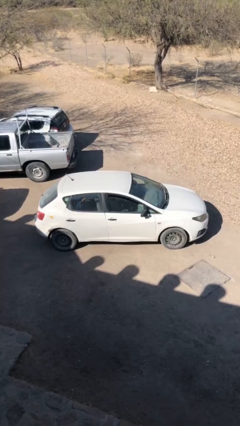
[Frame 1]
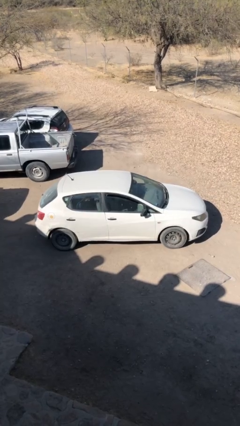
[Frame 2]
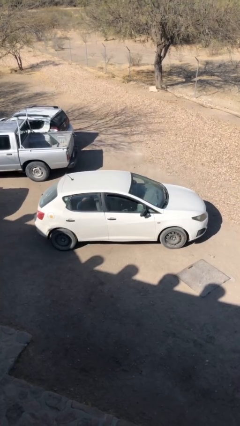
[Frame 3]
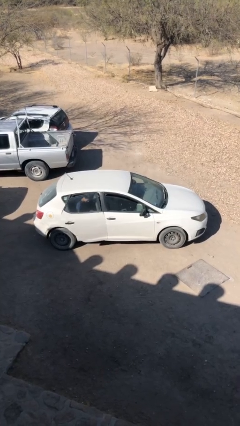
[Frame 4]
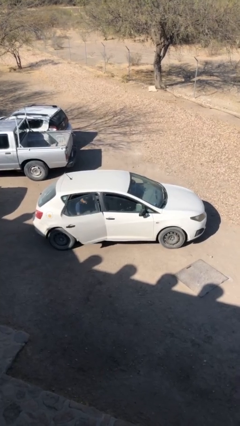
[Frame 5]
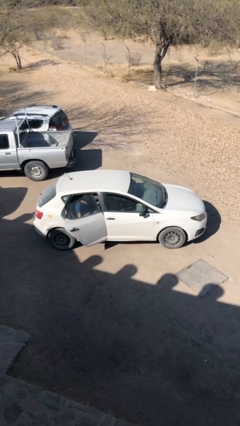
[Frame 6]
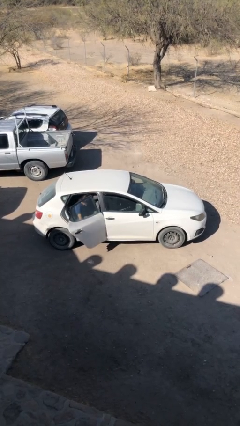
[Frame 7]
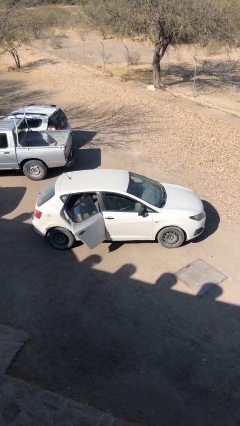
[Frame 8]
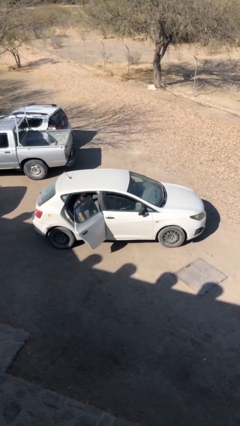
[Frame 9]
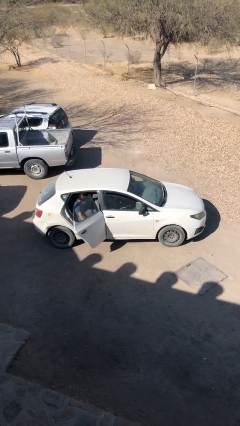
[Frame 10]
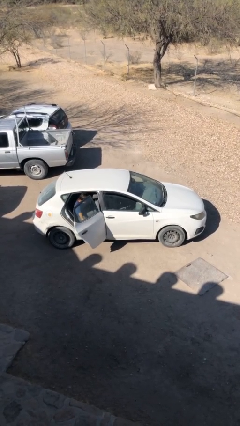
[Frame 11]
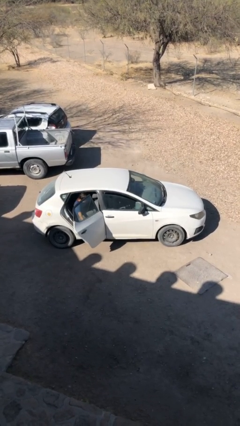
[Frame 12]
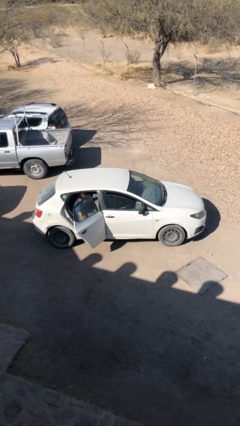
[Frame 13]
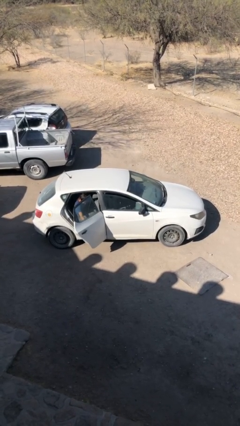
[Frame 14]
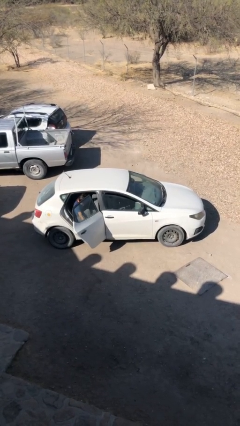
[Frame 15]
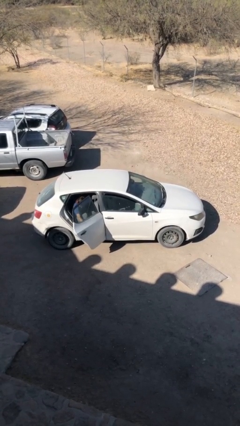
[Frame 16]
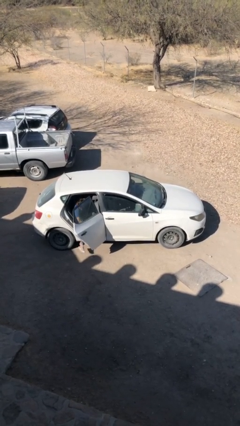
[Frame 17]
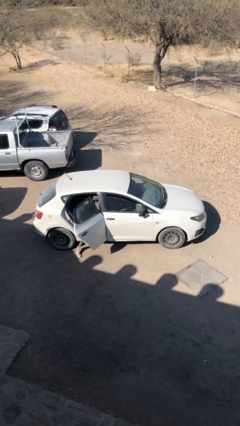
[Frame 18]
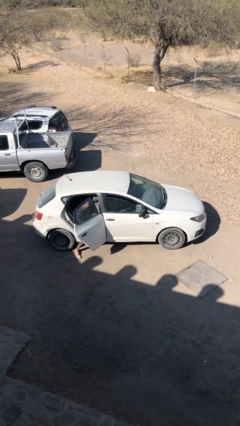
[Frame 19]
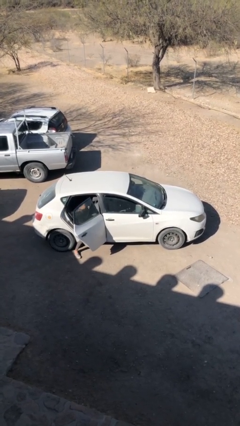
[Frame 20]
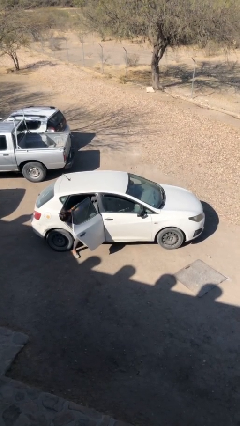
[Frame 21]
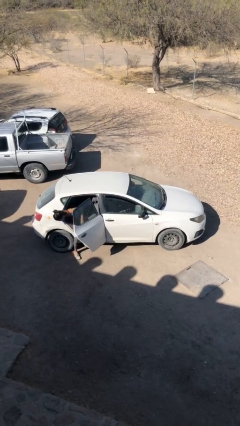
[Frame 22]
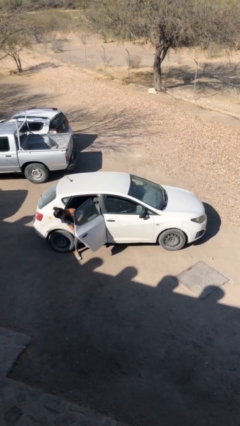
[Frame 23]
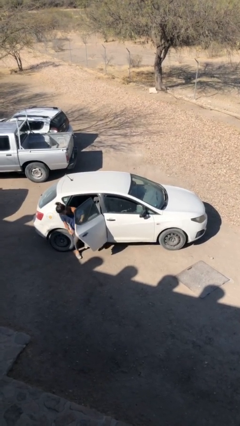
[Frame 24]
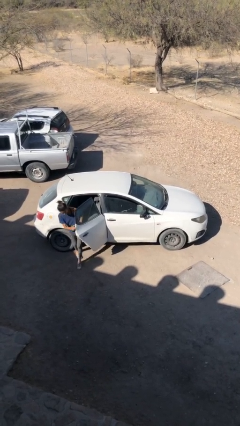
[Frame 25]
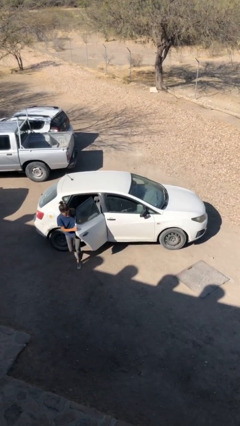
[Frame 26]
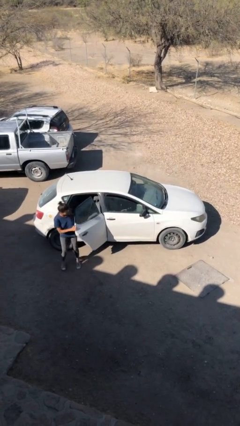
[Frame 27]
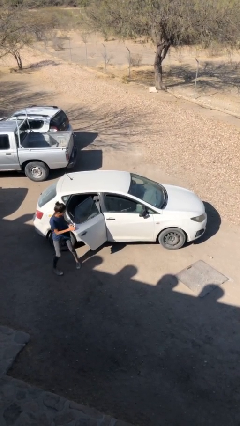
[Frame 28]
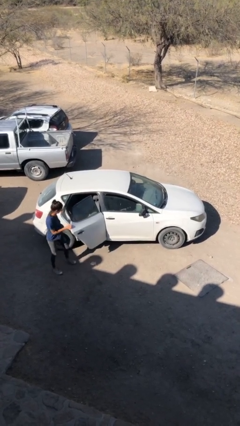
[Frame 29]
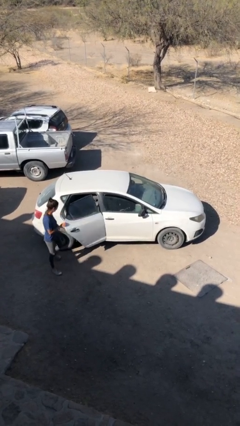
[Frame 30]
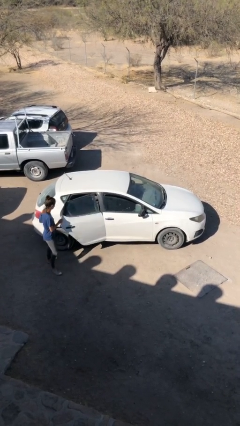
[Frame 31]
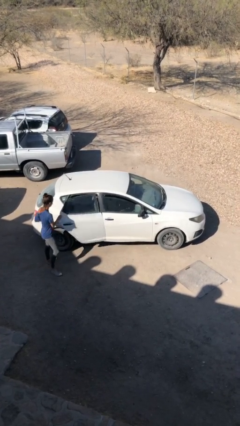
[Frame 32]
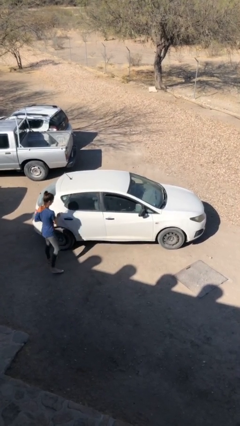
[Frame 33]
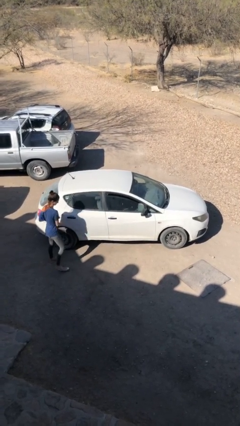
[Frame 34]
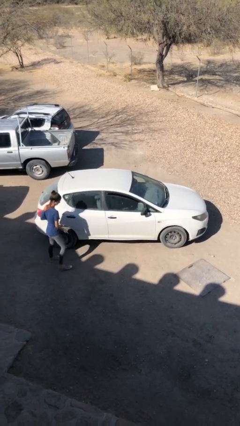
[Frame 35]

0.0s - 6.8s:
car drops off person

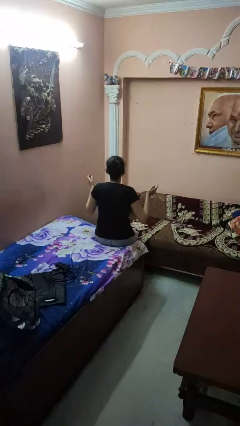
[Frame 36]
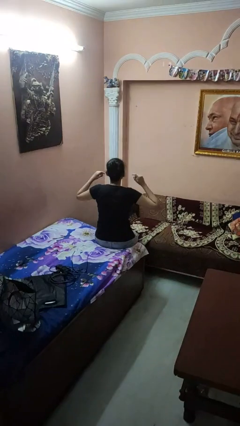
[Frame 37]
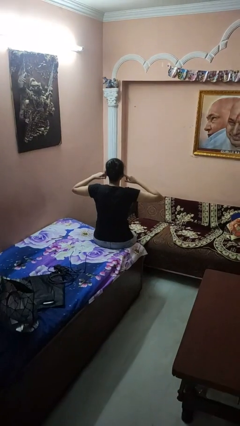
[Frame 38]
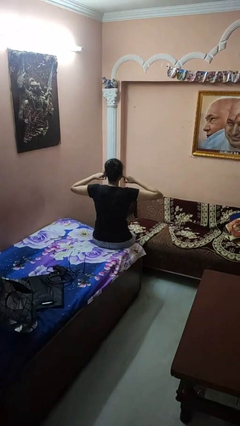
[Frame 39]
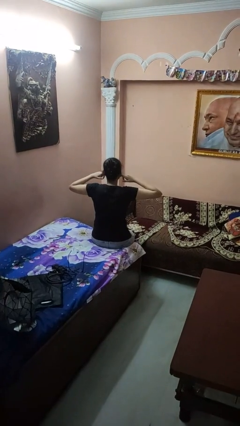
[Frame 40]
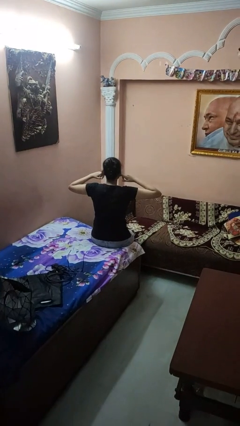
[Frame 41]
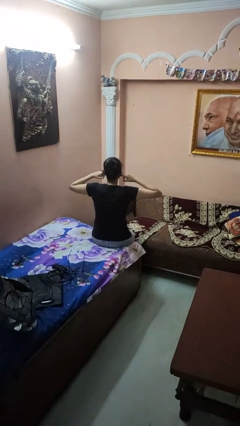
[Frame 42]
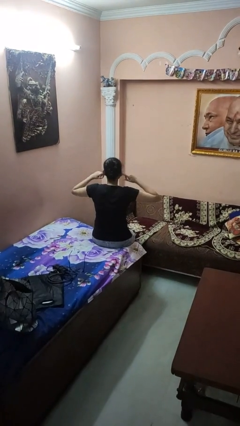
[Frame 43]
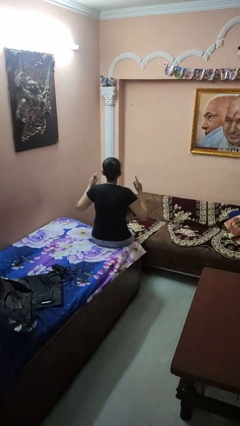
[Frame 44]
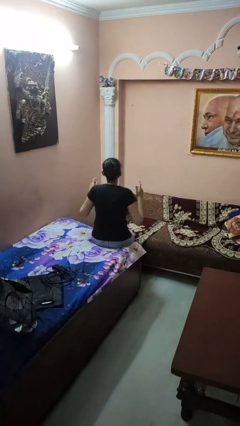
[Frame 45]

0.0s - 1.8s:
person puts fingers in ear

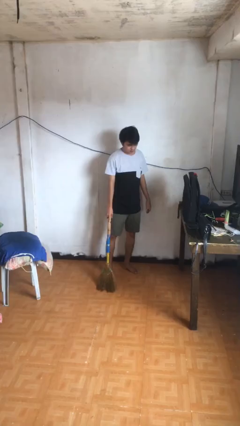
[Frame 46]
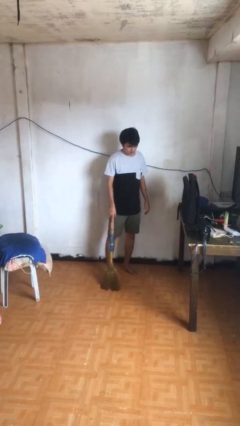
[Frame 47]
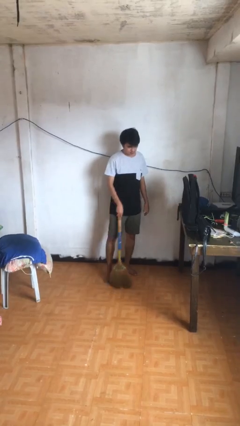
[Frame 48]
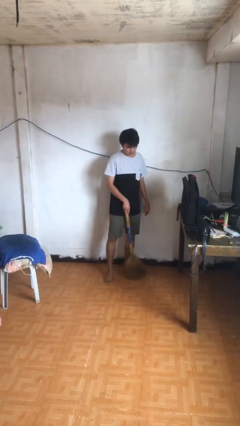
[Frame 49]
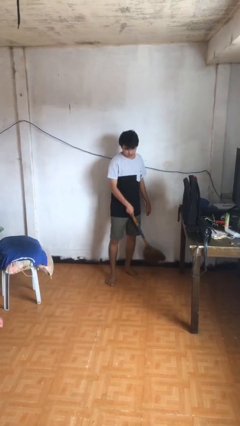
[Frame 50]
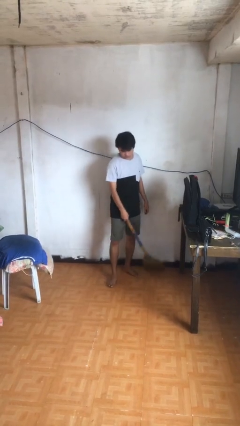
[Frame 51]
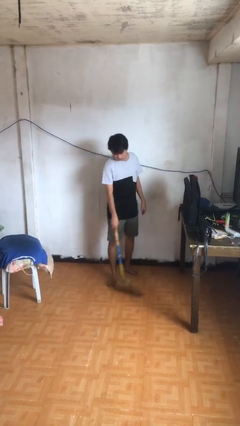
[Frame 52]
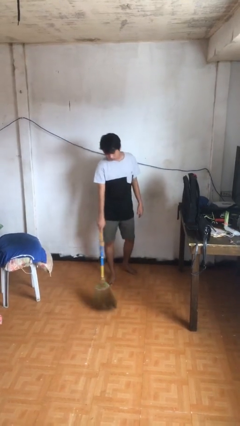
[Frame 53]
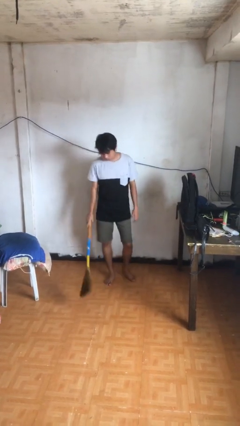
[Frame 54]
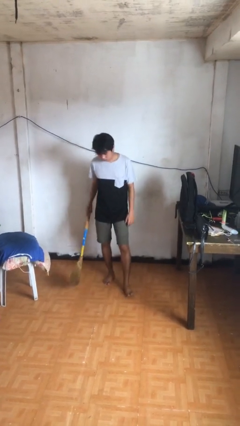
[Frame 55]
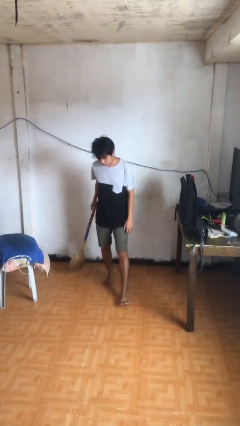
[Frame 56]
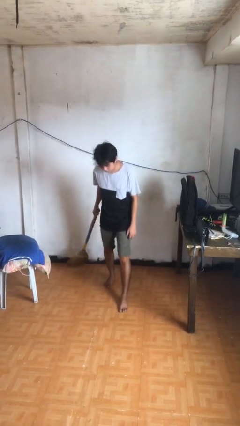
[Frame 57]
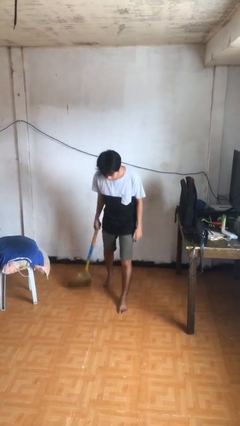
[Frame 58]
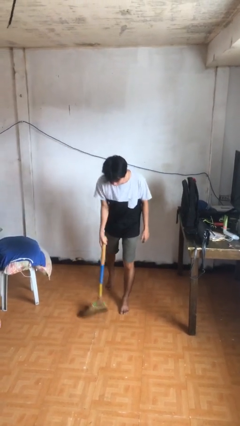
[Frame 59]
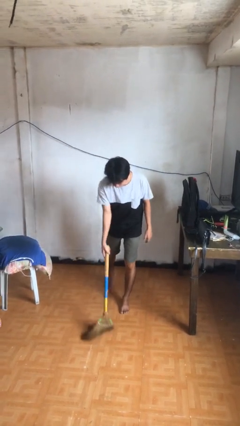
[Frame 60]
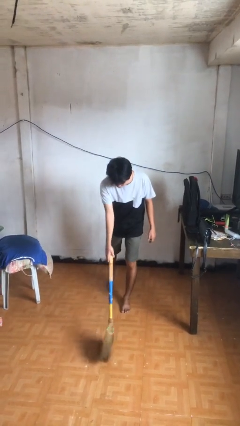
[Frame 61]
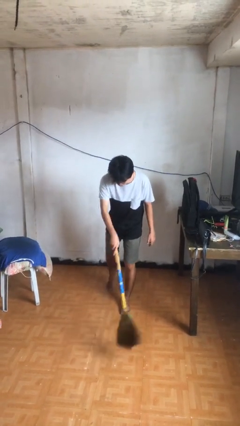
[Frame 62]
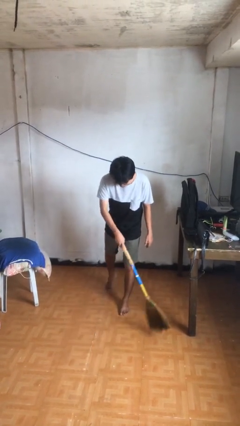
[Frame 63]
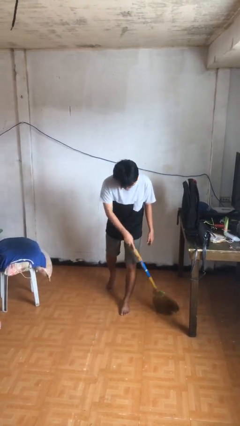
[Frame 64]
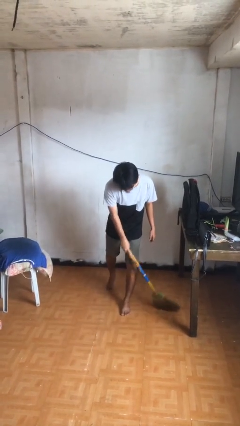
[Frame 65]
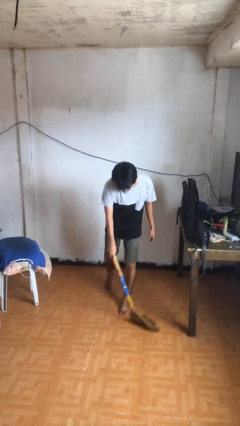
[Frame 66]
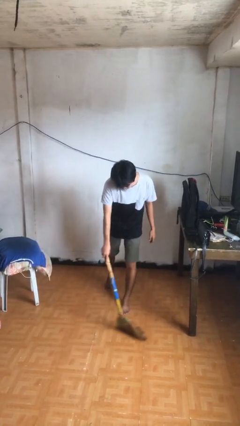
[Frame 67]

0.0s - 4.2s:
person sweeps floor

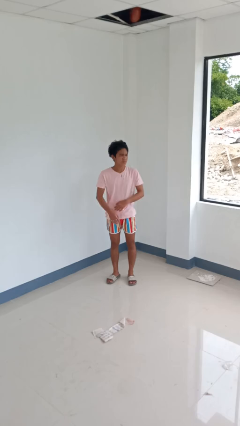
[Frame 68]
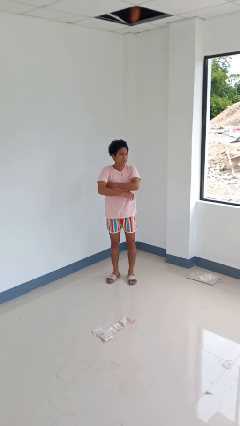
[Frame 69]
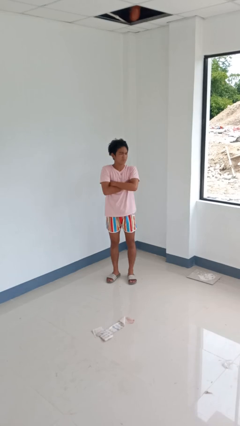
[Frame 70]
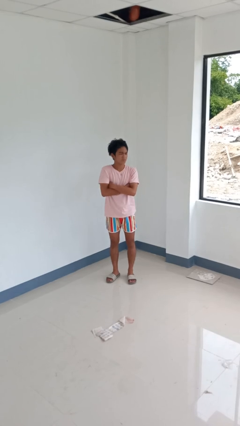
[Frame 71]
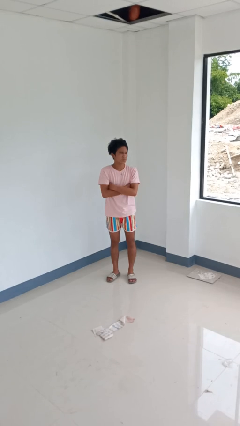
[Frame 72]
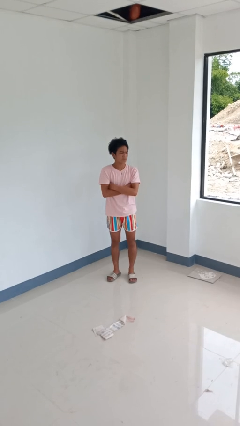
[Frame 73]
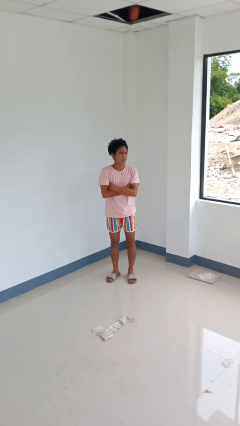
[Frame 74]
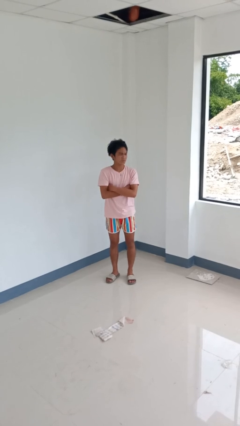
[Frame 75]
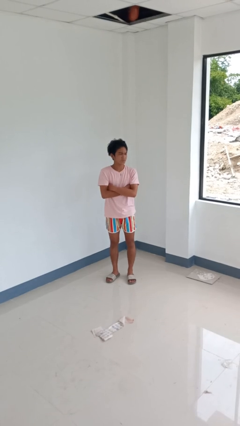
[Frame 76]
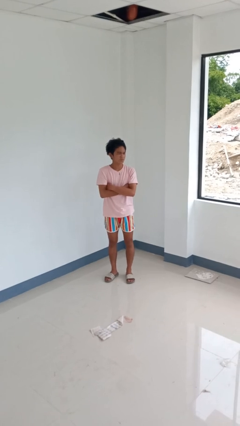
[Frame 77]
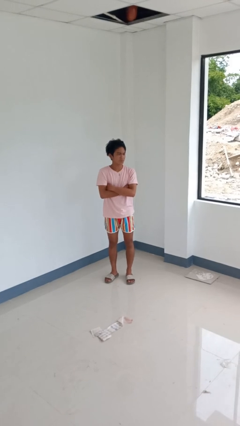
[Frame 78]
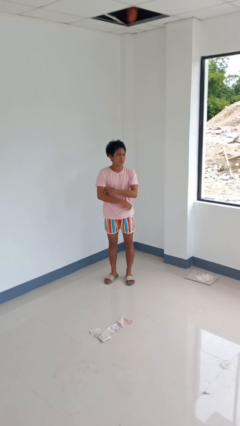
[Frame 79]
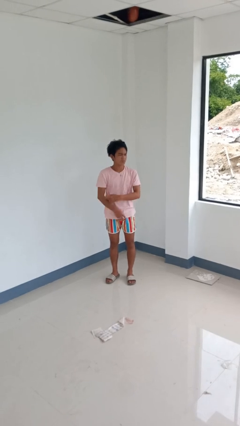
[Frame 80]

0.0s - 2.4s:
person crosses arms

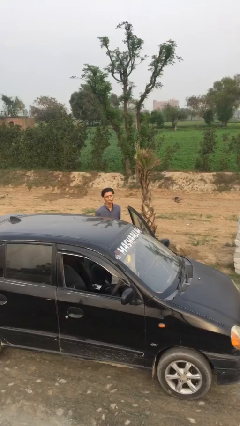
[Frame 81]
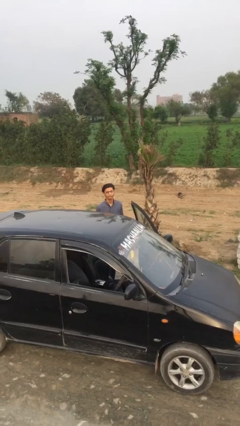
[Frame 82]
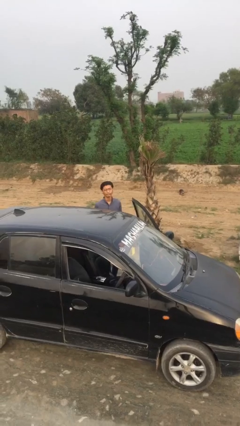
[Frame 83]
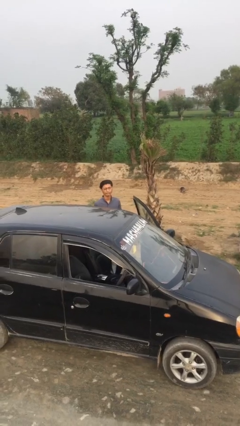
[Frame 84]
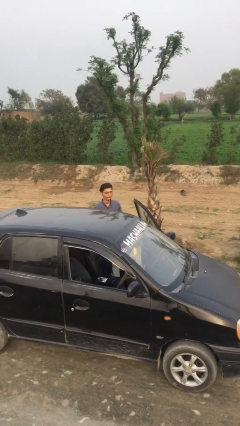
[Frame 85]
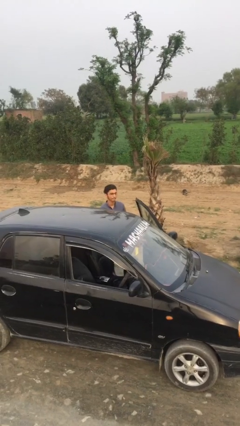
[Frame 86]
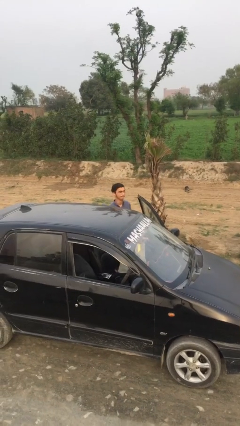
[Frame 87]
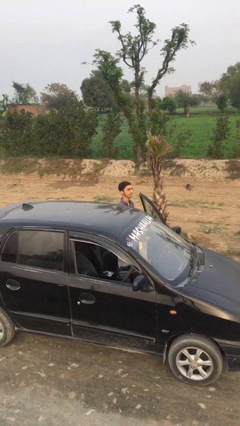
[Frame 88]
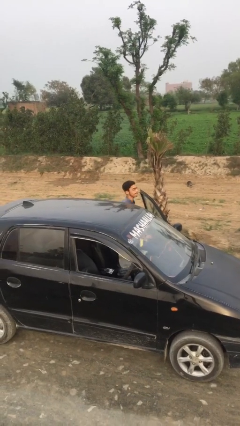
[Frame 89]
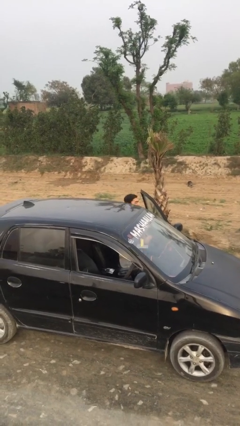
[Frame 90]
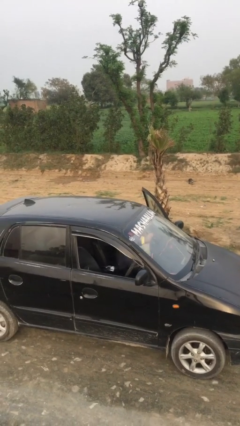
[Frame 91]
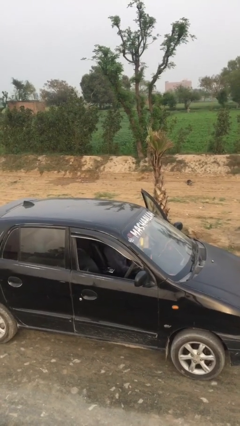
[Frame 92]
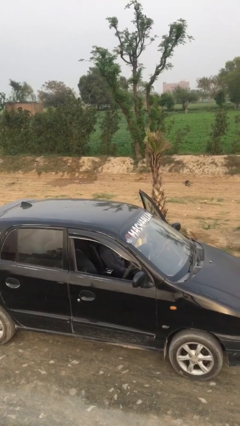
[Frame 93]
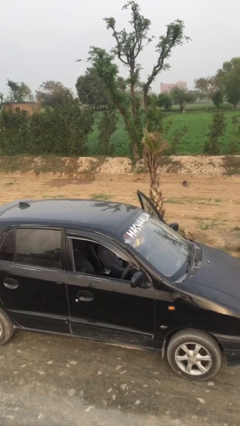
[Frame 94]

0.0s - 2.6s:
person enters car

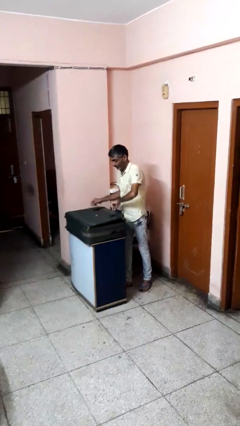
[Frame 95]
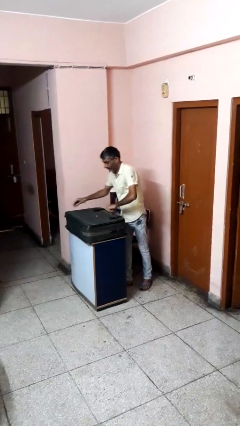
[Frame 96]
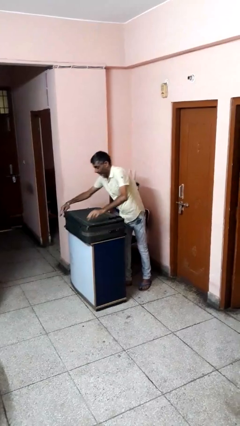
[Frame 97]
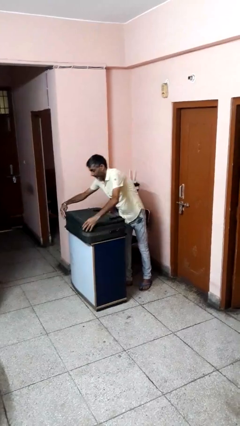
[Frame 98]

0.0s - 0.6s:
person closes suitcase
